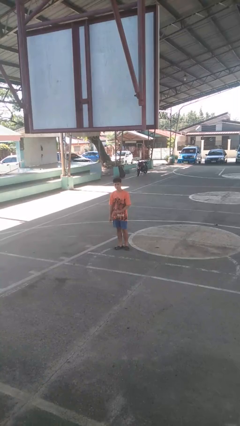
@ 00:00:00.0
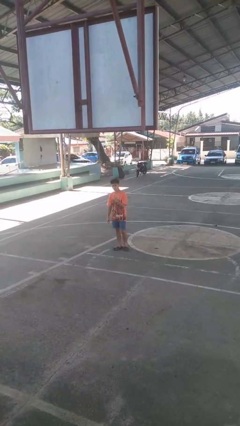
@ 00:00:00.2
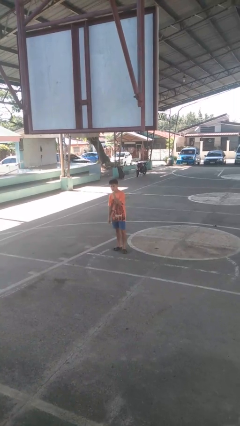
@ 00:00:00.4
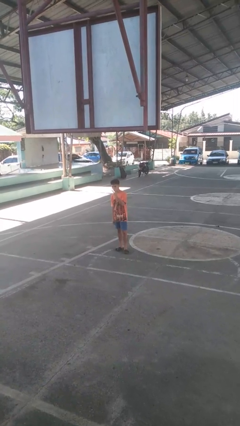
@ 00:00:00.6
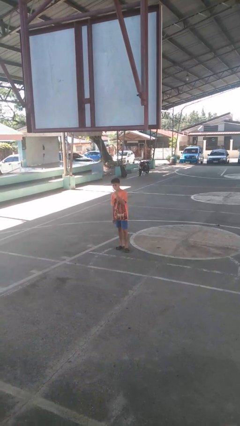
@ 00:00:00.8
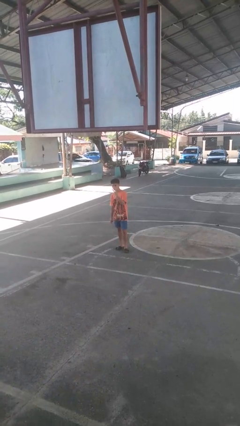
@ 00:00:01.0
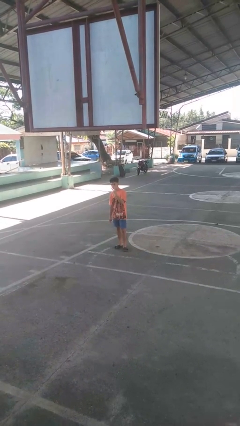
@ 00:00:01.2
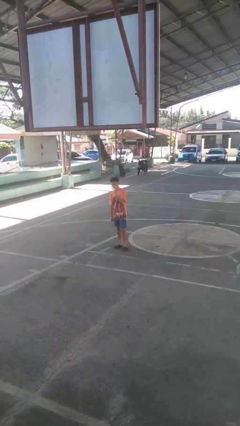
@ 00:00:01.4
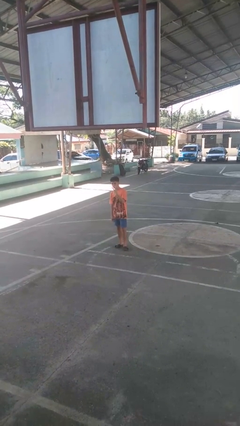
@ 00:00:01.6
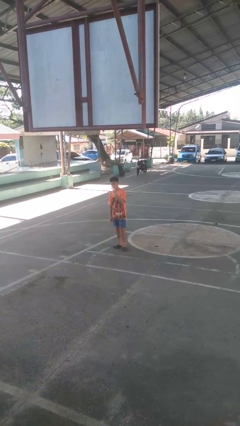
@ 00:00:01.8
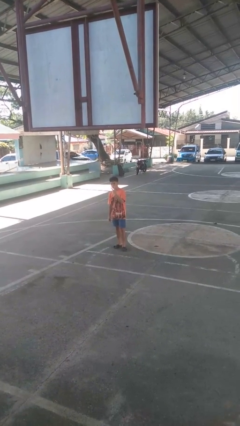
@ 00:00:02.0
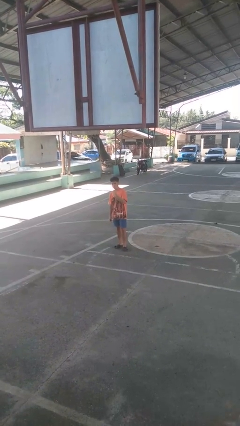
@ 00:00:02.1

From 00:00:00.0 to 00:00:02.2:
person gestures peace

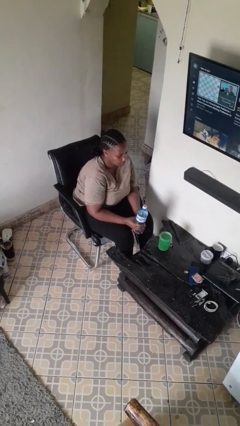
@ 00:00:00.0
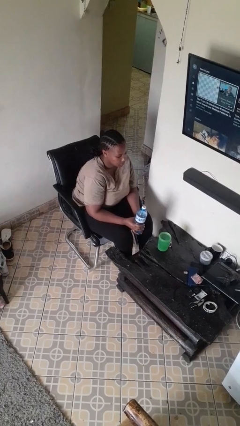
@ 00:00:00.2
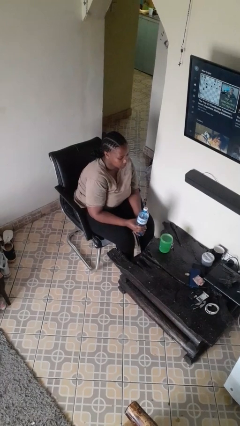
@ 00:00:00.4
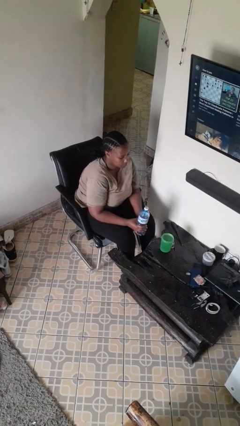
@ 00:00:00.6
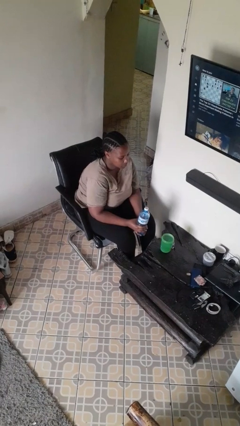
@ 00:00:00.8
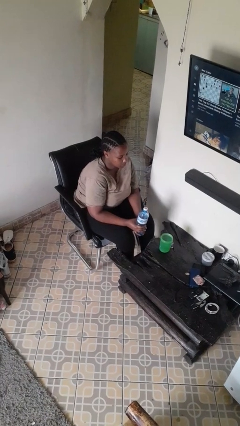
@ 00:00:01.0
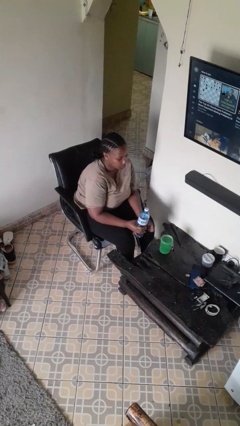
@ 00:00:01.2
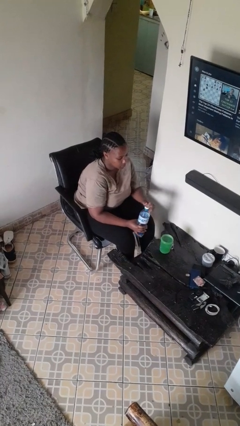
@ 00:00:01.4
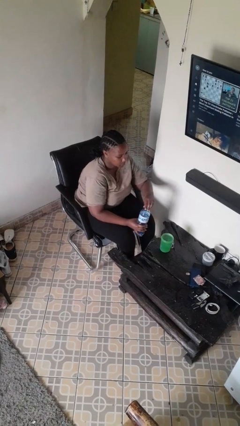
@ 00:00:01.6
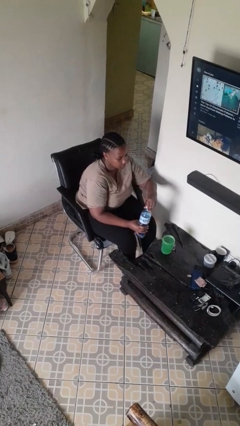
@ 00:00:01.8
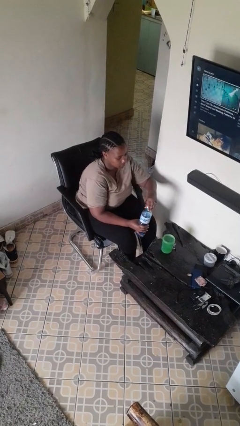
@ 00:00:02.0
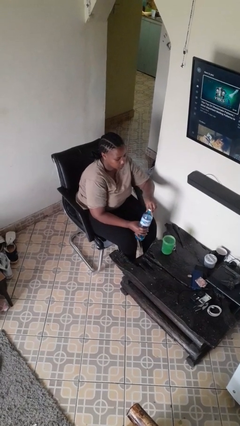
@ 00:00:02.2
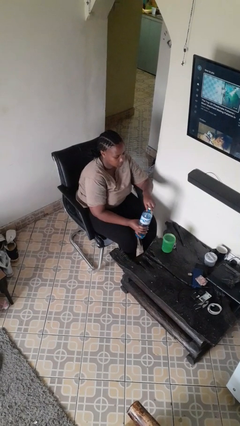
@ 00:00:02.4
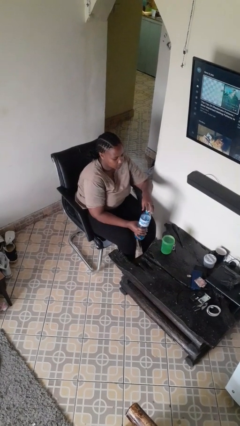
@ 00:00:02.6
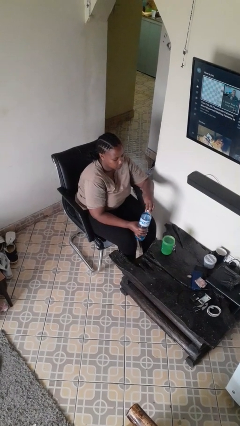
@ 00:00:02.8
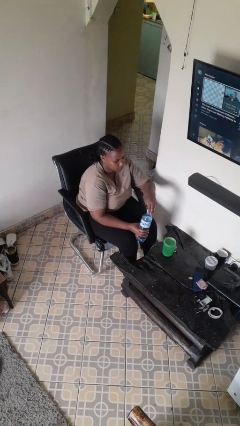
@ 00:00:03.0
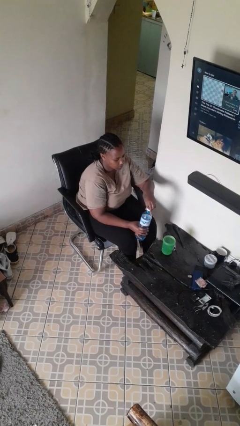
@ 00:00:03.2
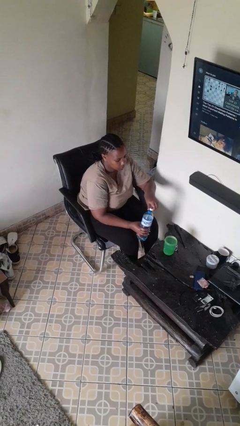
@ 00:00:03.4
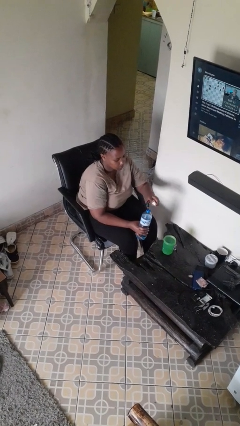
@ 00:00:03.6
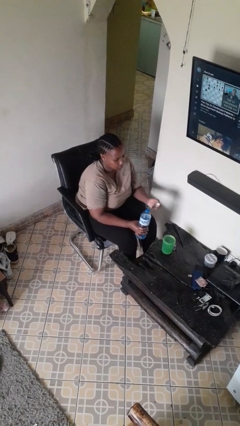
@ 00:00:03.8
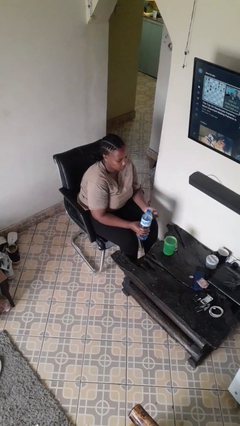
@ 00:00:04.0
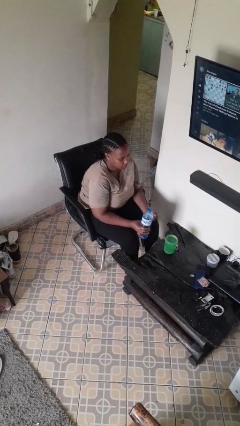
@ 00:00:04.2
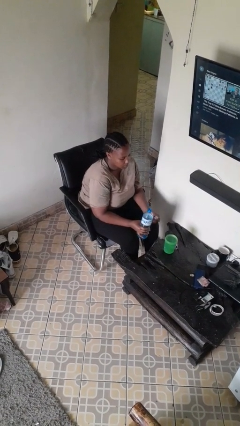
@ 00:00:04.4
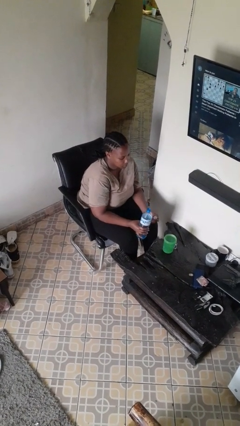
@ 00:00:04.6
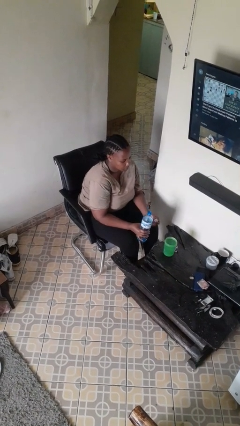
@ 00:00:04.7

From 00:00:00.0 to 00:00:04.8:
person unscrews lid from bottle

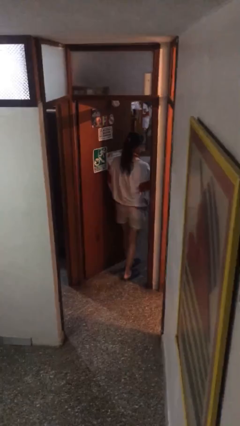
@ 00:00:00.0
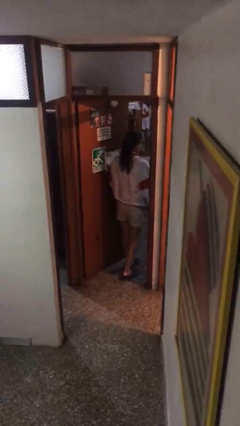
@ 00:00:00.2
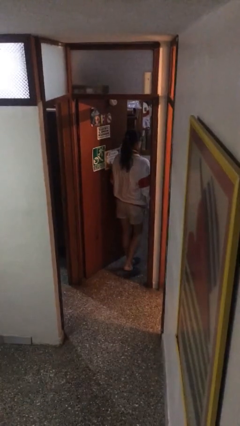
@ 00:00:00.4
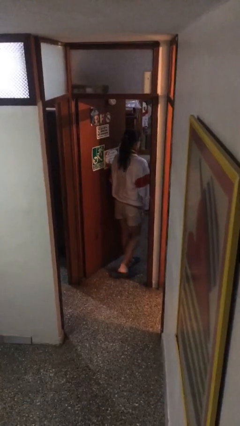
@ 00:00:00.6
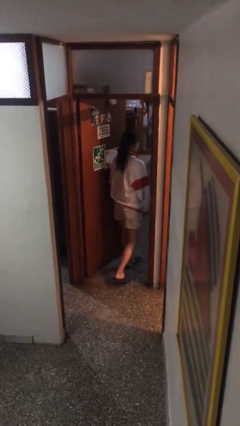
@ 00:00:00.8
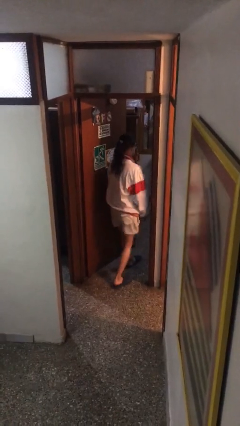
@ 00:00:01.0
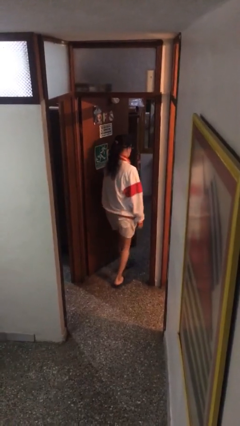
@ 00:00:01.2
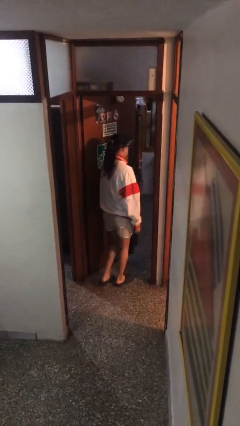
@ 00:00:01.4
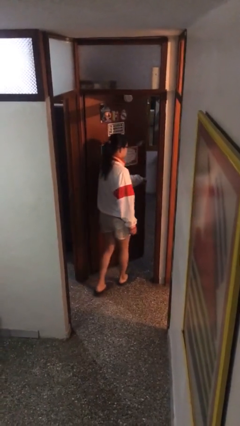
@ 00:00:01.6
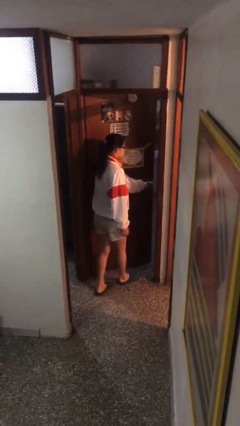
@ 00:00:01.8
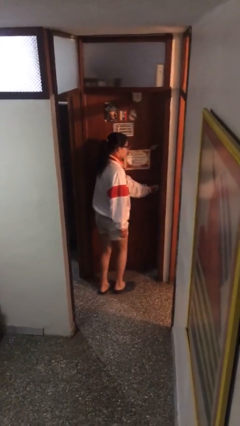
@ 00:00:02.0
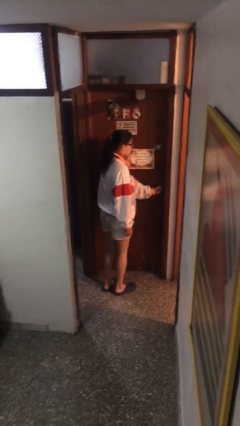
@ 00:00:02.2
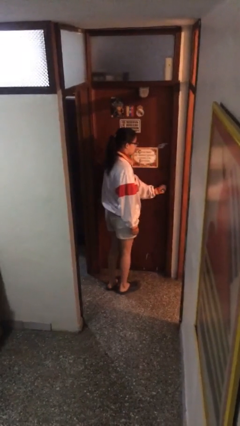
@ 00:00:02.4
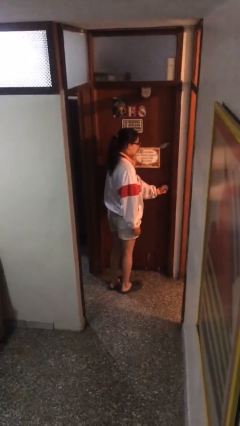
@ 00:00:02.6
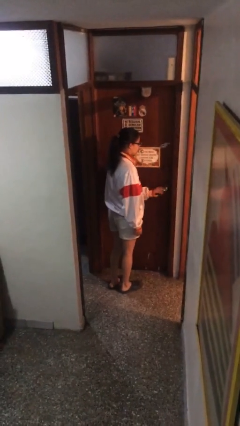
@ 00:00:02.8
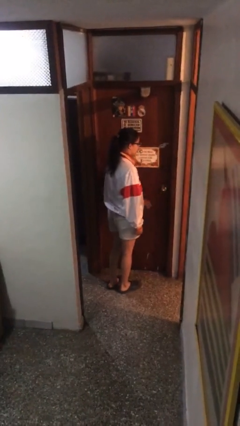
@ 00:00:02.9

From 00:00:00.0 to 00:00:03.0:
person closes facility door

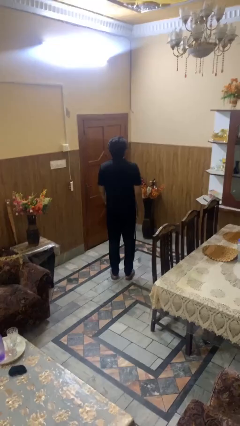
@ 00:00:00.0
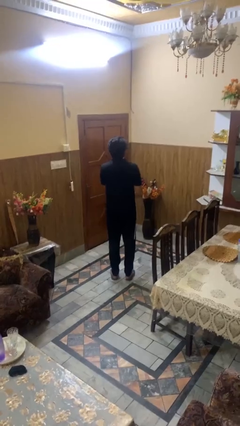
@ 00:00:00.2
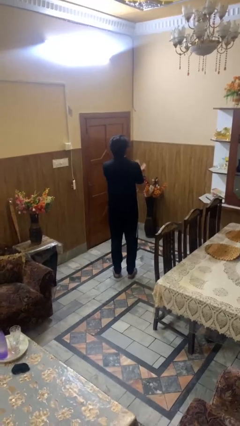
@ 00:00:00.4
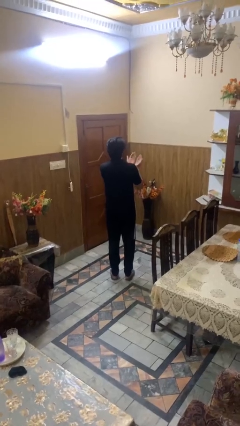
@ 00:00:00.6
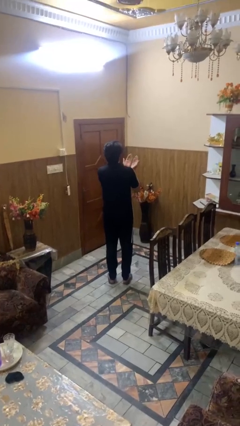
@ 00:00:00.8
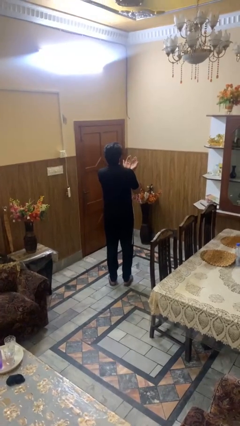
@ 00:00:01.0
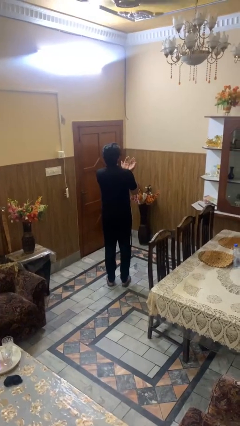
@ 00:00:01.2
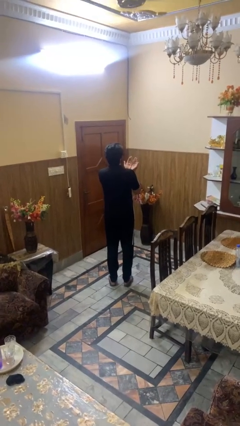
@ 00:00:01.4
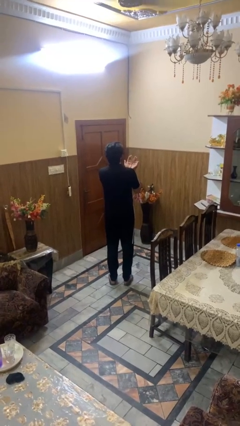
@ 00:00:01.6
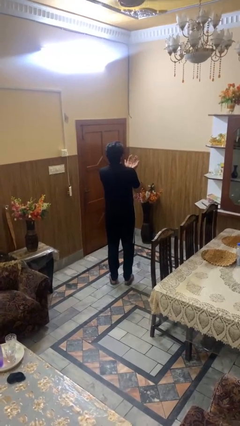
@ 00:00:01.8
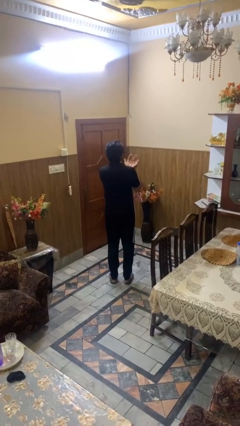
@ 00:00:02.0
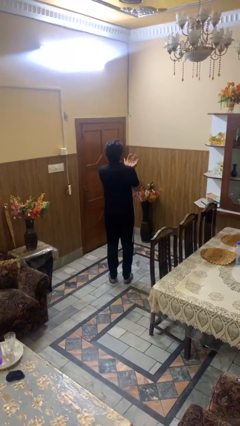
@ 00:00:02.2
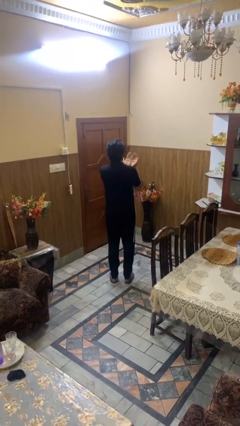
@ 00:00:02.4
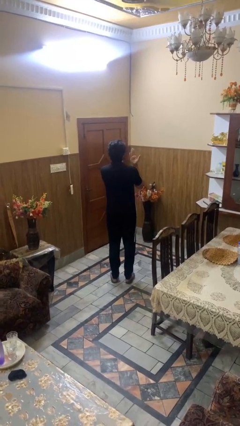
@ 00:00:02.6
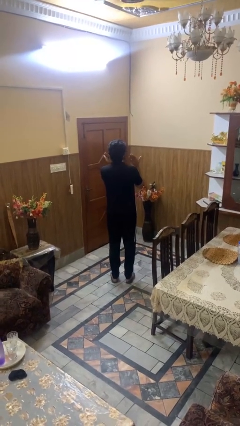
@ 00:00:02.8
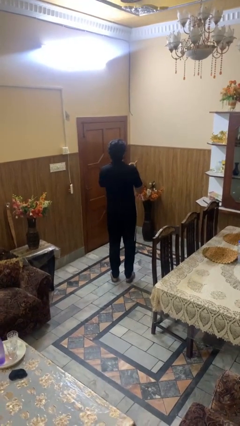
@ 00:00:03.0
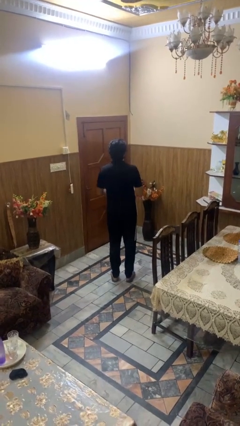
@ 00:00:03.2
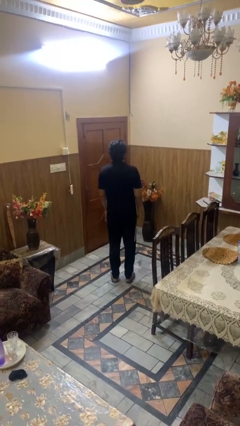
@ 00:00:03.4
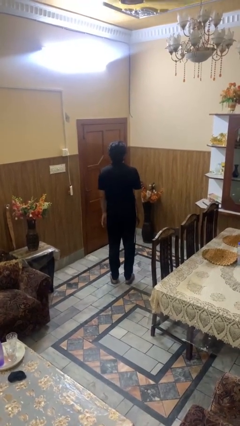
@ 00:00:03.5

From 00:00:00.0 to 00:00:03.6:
person prays

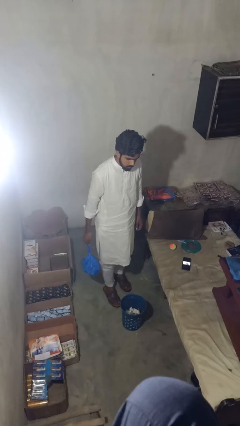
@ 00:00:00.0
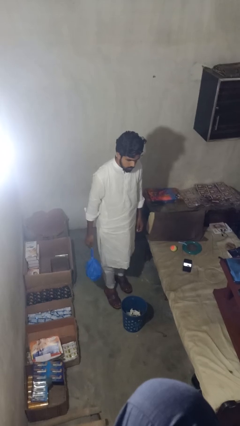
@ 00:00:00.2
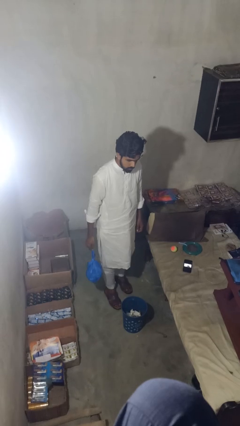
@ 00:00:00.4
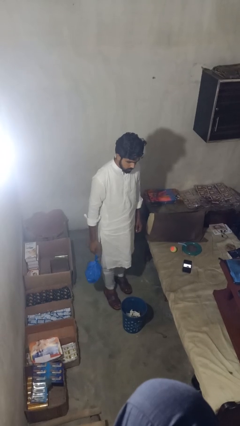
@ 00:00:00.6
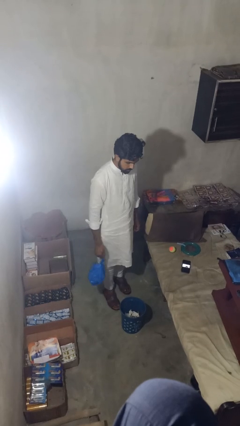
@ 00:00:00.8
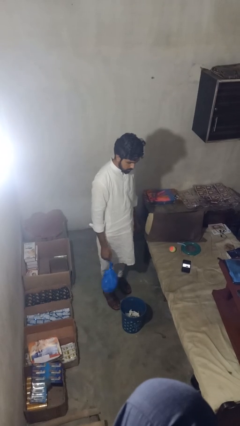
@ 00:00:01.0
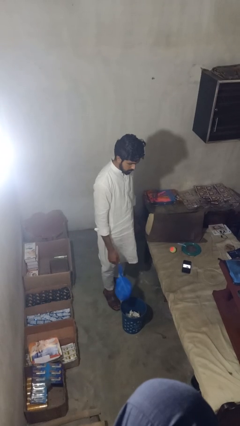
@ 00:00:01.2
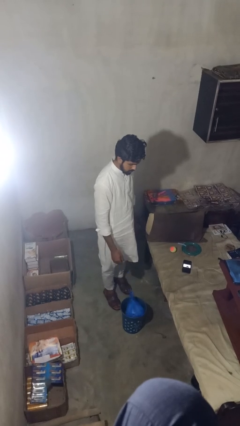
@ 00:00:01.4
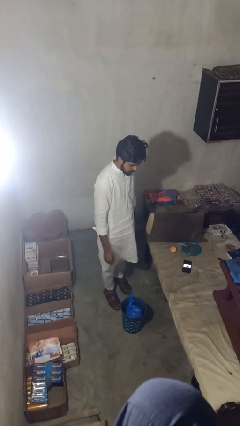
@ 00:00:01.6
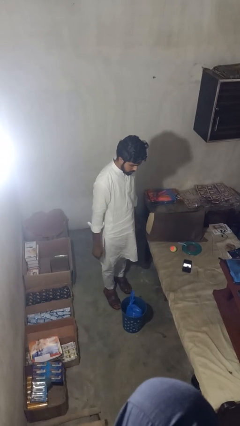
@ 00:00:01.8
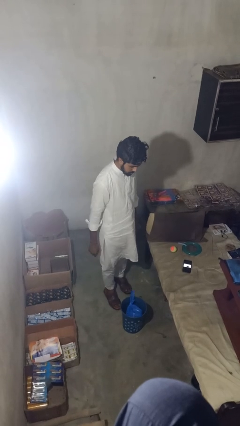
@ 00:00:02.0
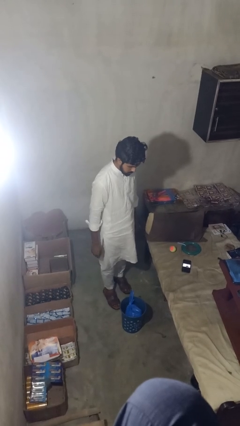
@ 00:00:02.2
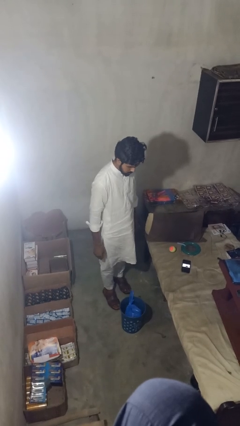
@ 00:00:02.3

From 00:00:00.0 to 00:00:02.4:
person puts object into basket

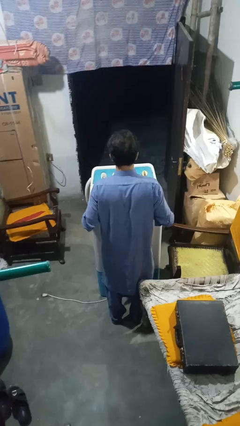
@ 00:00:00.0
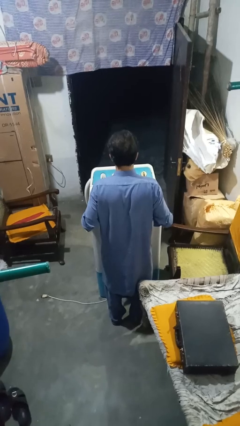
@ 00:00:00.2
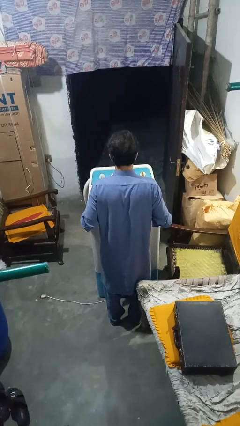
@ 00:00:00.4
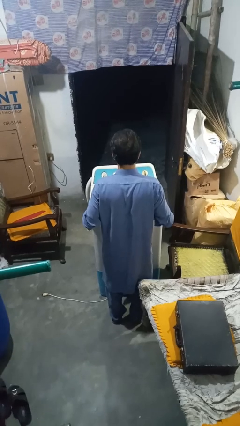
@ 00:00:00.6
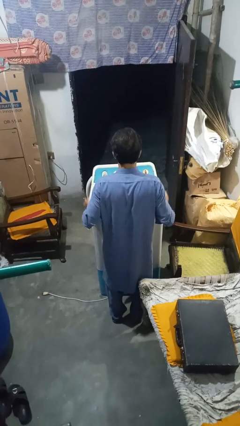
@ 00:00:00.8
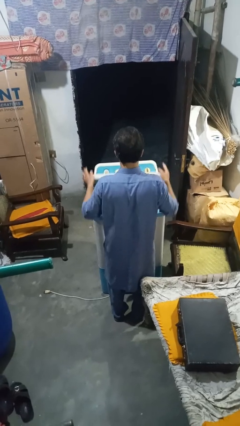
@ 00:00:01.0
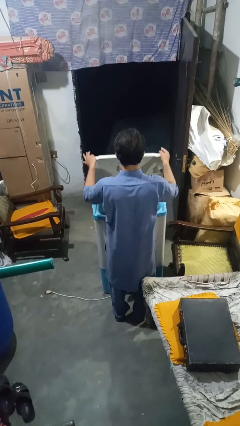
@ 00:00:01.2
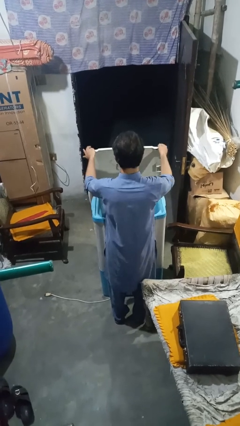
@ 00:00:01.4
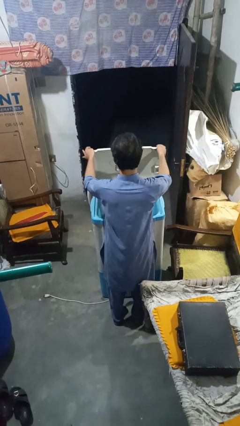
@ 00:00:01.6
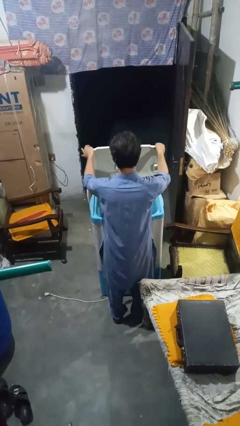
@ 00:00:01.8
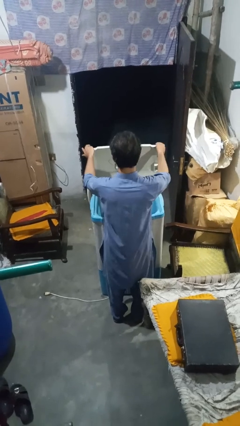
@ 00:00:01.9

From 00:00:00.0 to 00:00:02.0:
person opens clothes washer
